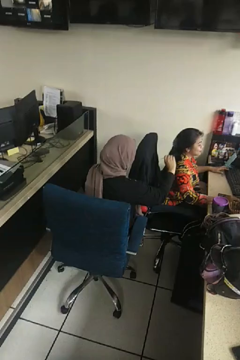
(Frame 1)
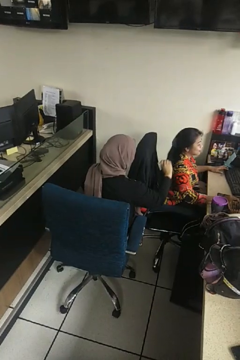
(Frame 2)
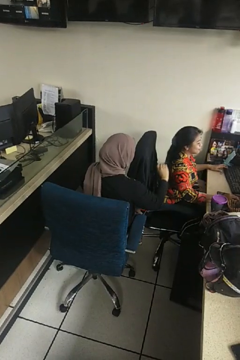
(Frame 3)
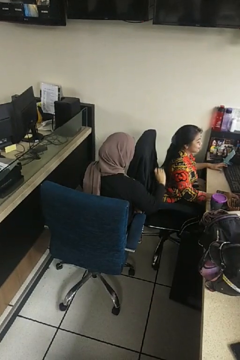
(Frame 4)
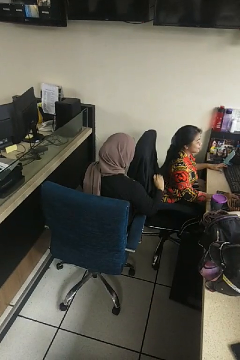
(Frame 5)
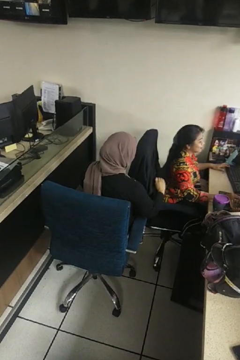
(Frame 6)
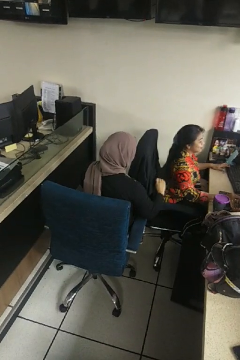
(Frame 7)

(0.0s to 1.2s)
person brushes hair of person

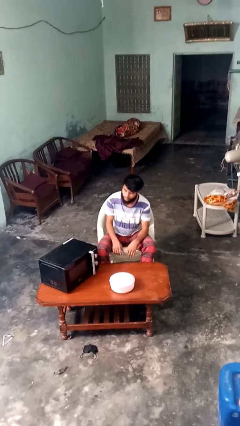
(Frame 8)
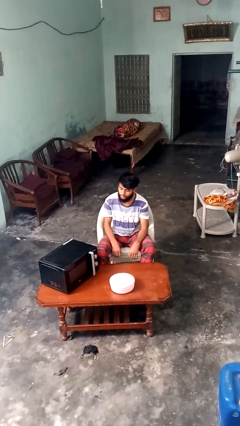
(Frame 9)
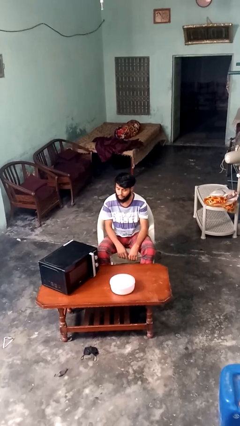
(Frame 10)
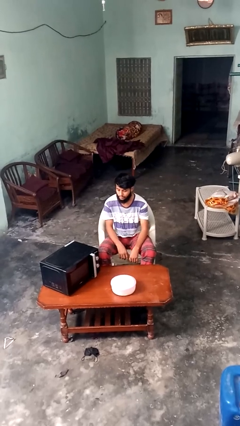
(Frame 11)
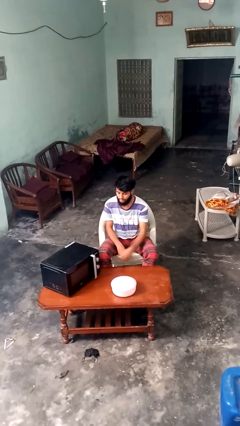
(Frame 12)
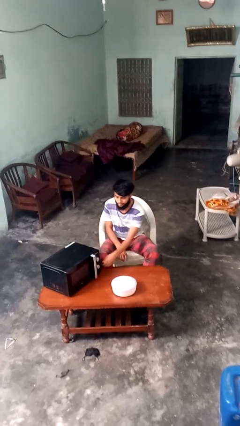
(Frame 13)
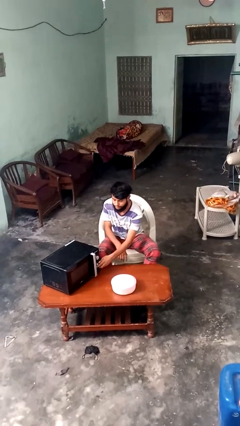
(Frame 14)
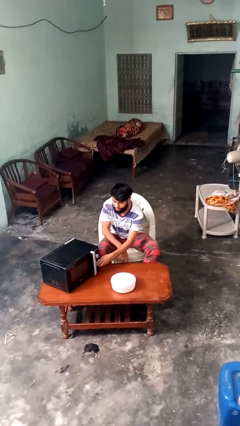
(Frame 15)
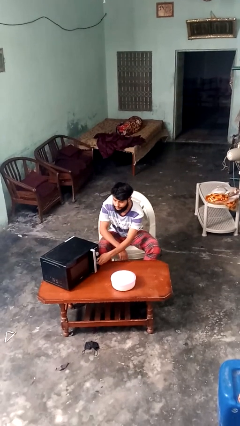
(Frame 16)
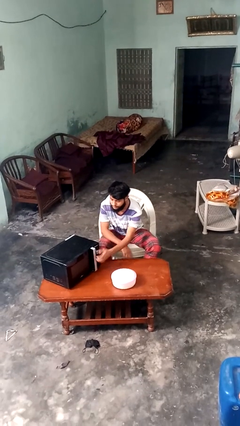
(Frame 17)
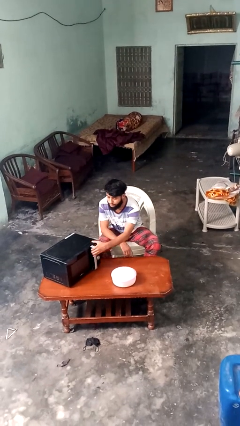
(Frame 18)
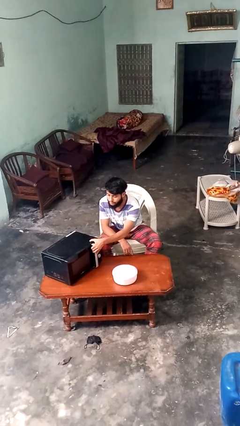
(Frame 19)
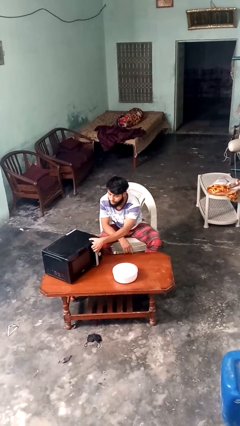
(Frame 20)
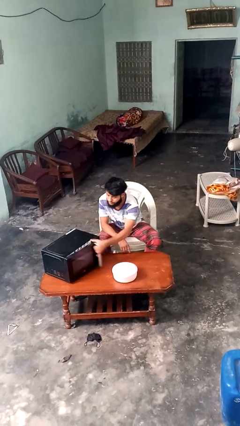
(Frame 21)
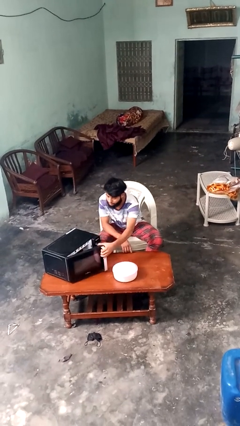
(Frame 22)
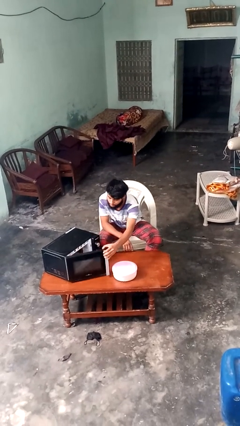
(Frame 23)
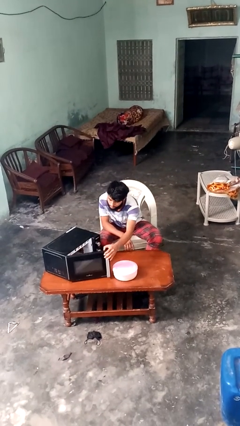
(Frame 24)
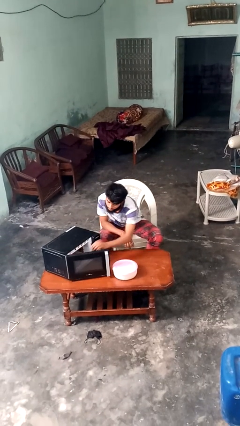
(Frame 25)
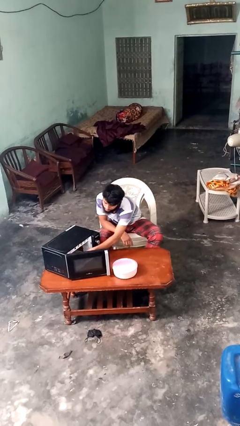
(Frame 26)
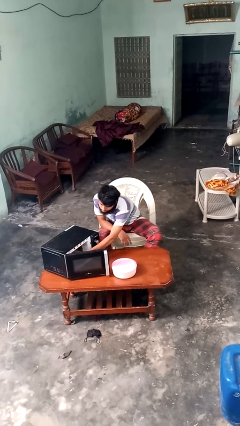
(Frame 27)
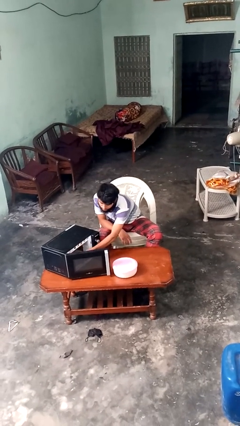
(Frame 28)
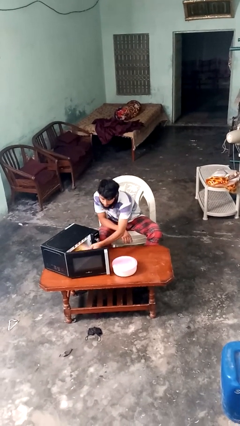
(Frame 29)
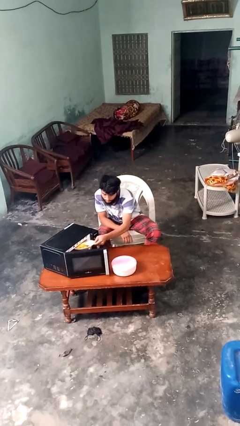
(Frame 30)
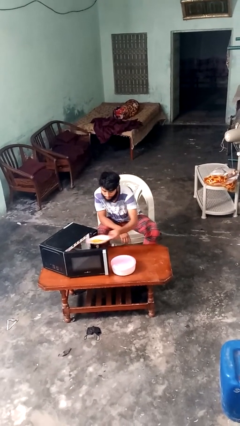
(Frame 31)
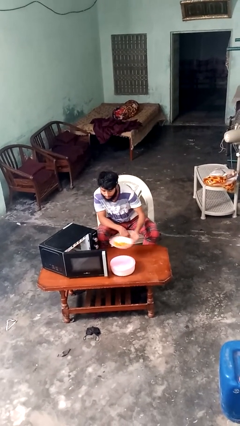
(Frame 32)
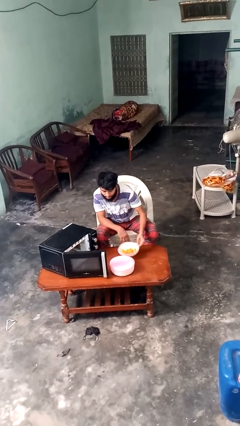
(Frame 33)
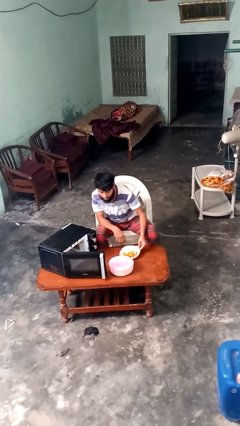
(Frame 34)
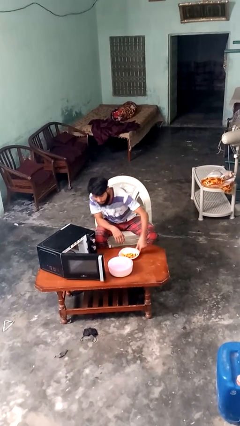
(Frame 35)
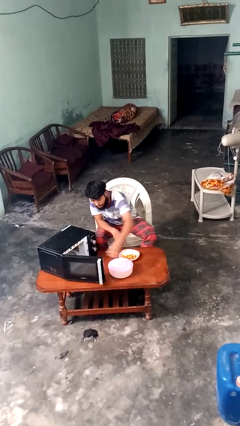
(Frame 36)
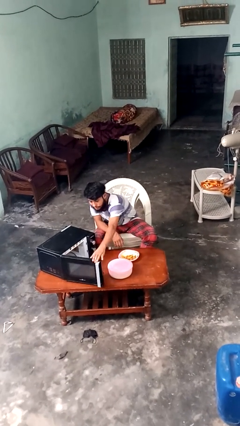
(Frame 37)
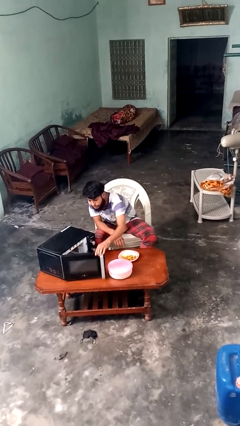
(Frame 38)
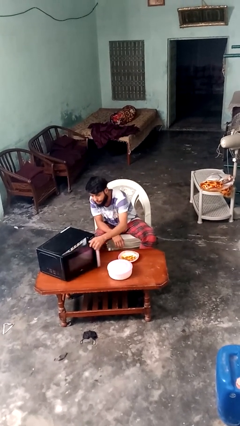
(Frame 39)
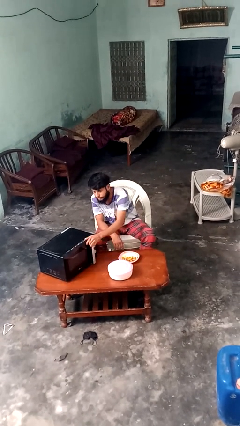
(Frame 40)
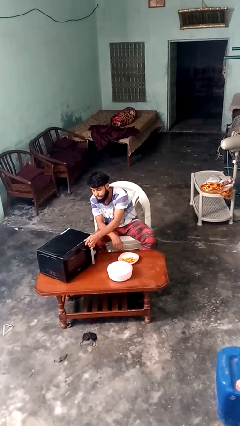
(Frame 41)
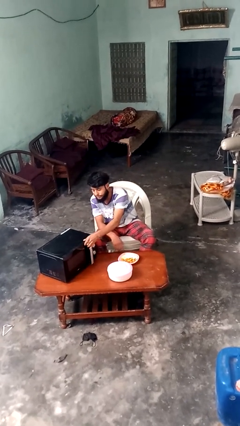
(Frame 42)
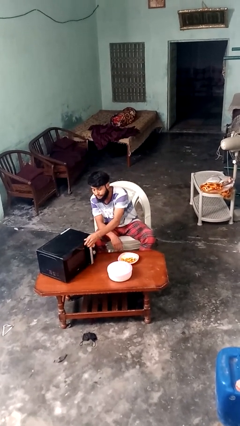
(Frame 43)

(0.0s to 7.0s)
person takes object from microwave

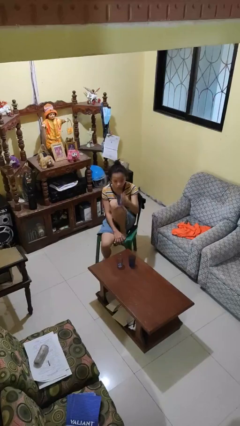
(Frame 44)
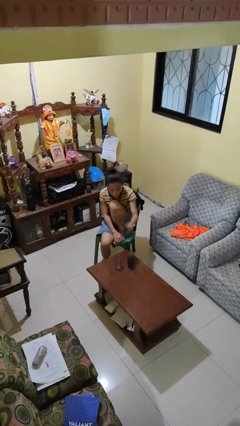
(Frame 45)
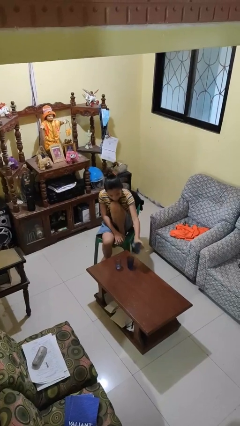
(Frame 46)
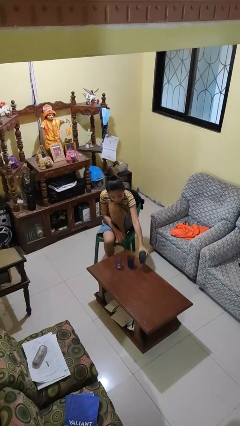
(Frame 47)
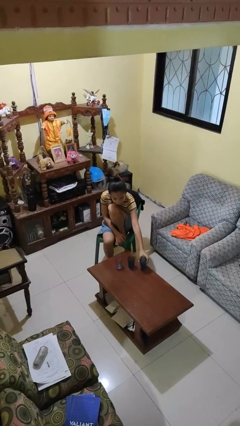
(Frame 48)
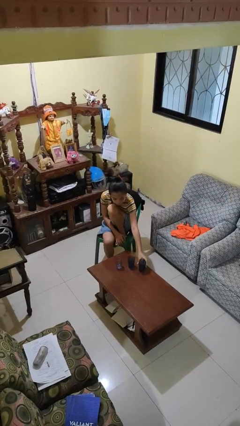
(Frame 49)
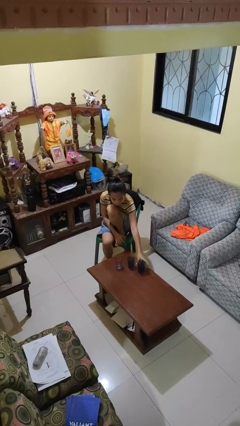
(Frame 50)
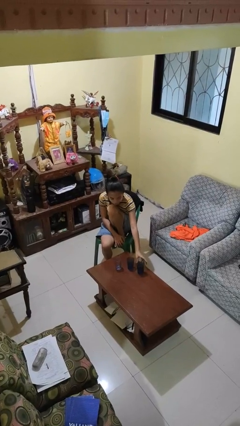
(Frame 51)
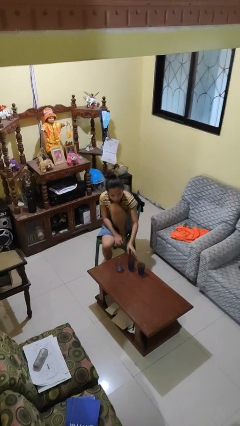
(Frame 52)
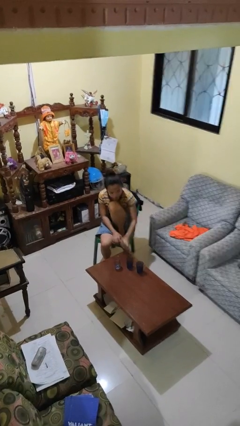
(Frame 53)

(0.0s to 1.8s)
person puts down object on table

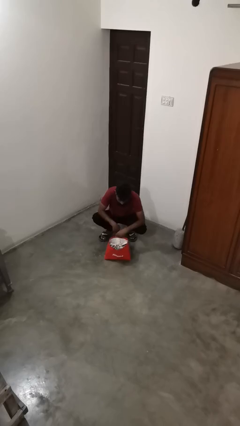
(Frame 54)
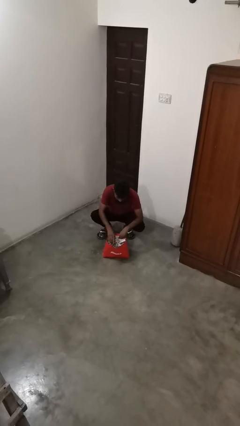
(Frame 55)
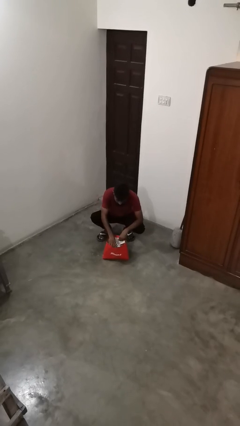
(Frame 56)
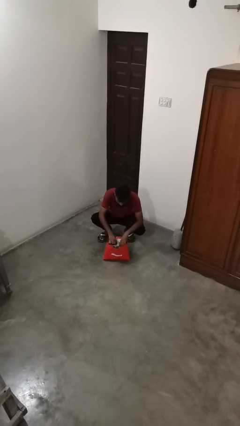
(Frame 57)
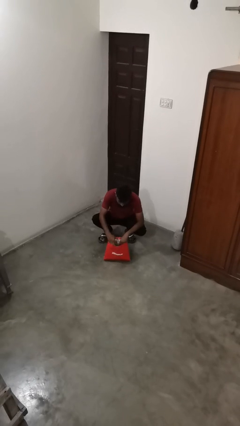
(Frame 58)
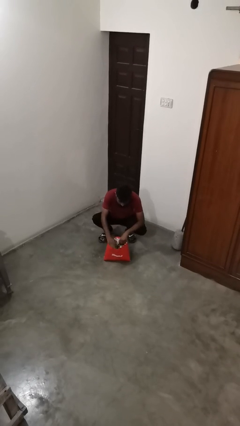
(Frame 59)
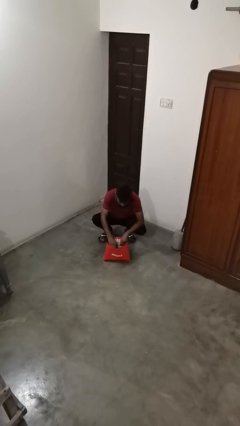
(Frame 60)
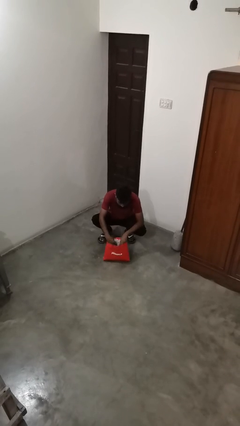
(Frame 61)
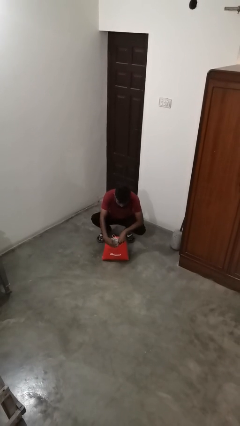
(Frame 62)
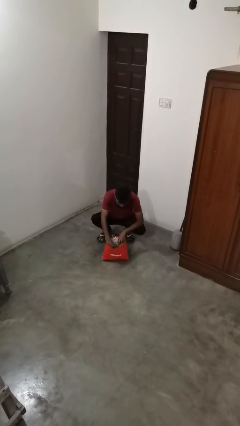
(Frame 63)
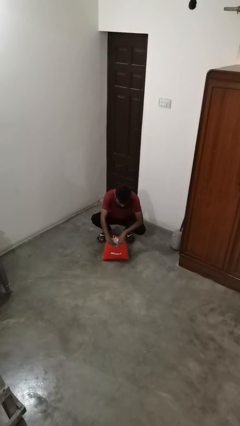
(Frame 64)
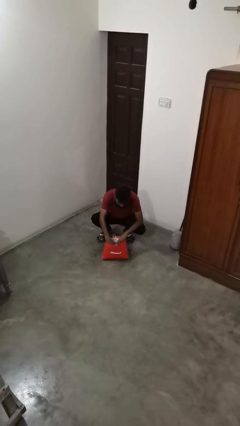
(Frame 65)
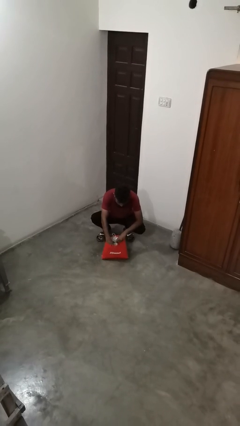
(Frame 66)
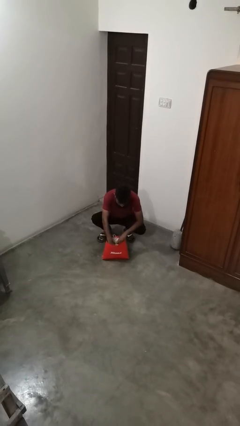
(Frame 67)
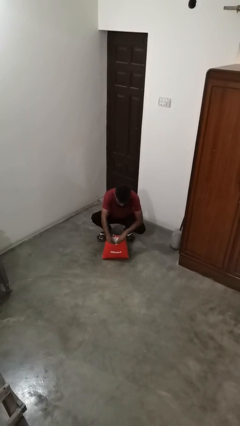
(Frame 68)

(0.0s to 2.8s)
person searches in bag

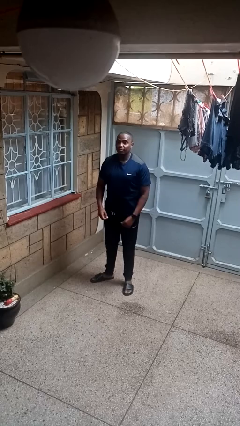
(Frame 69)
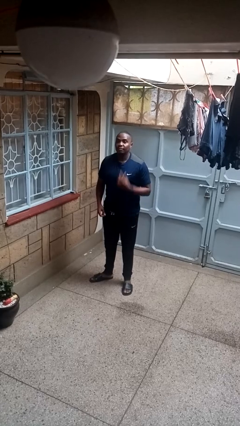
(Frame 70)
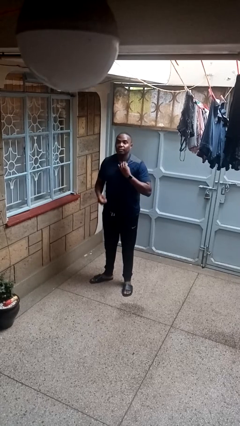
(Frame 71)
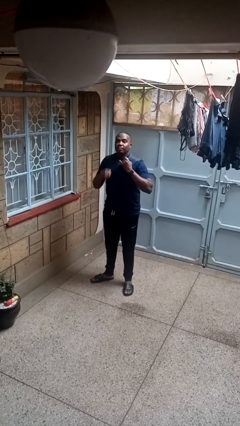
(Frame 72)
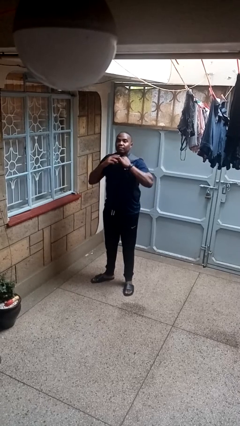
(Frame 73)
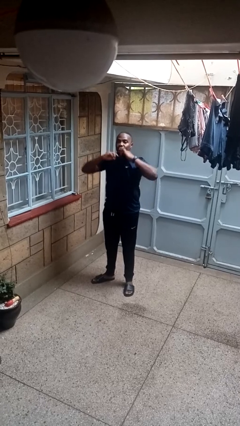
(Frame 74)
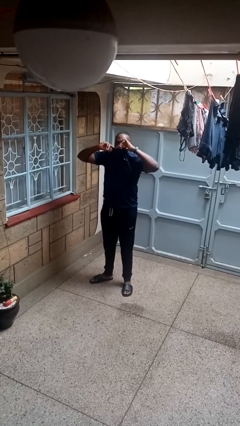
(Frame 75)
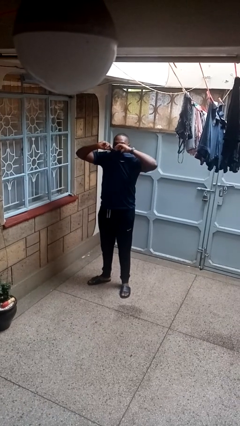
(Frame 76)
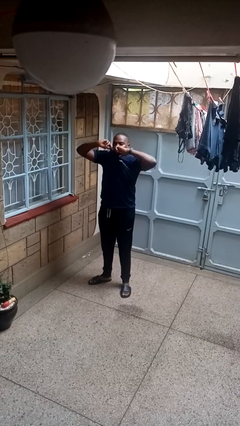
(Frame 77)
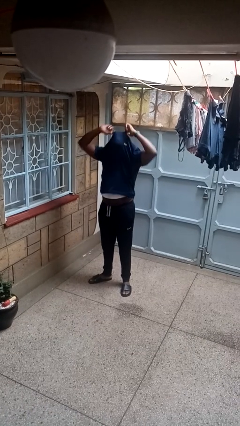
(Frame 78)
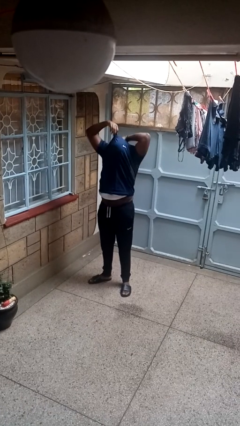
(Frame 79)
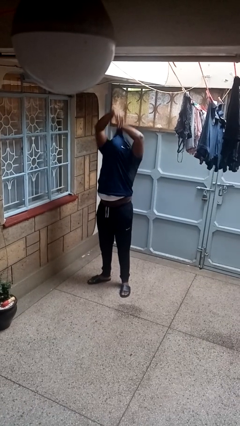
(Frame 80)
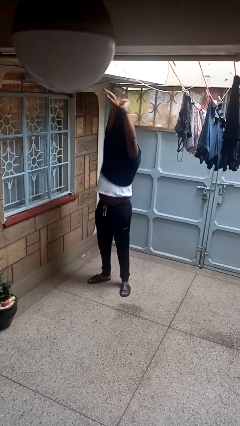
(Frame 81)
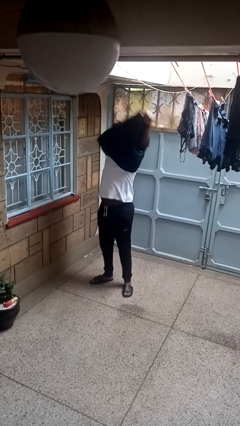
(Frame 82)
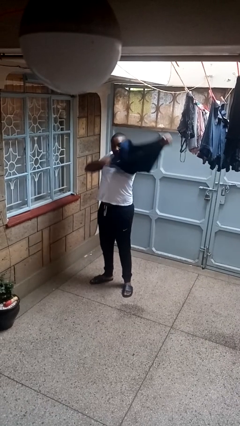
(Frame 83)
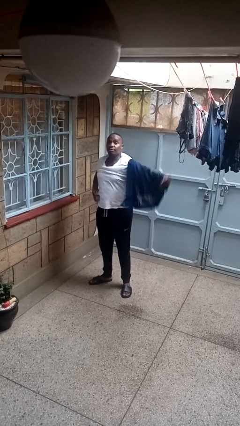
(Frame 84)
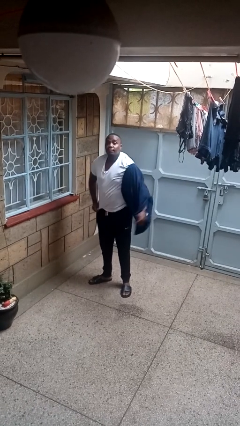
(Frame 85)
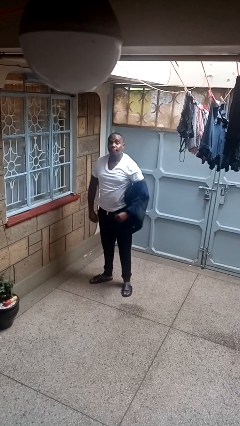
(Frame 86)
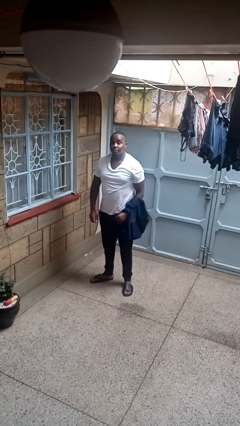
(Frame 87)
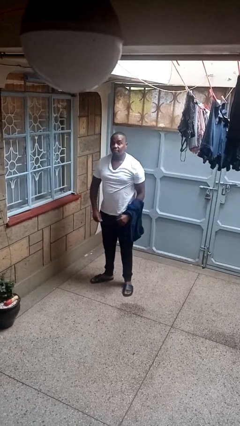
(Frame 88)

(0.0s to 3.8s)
person takes off shirt

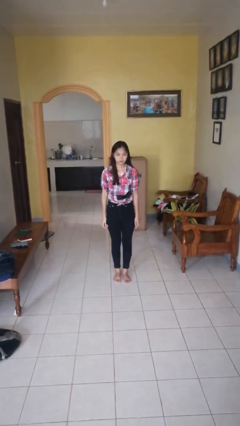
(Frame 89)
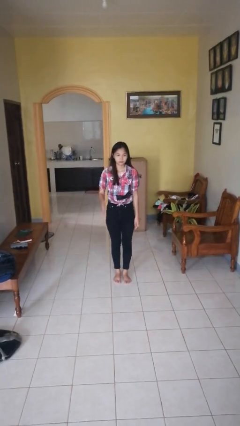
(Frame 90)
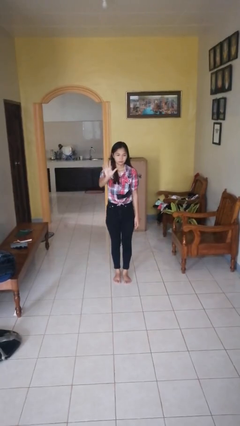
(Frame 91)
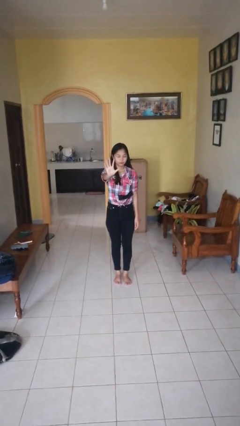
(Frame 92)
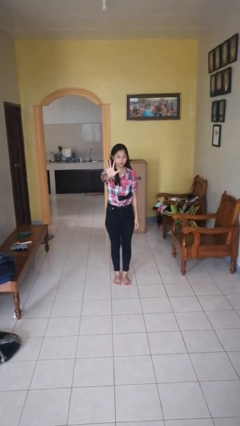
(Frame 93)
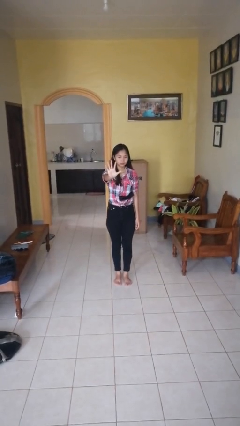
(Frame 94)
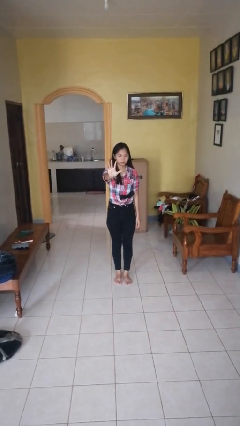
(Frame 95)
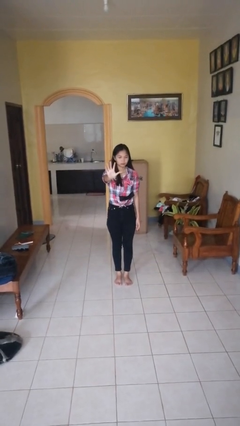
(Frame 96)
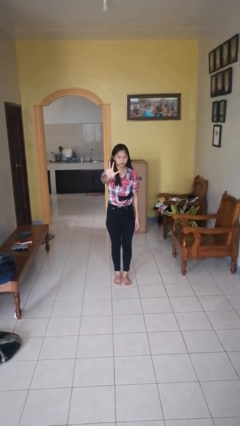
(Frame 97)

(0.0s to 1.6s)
person gestures number five
